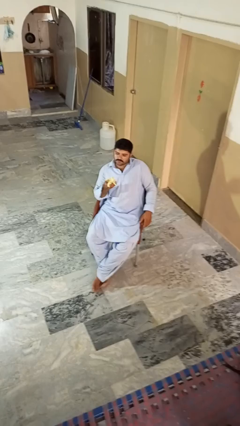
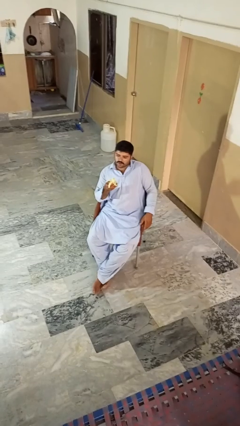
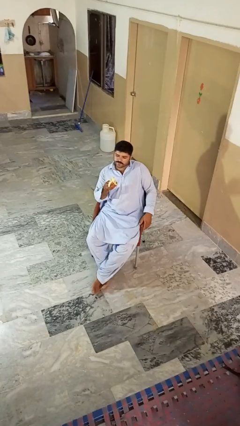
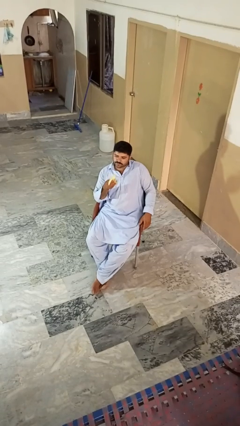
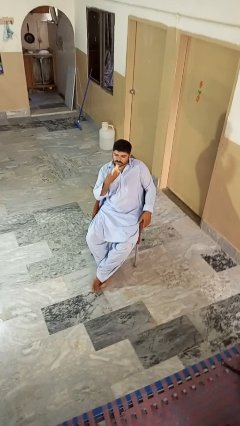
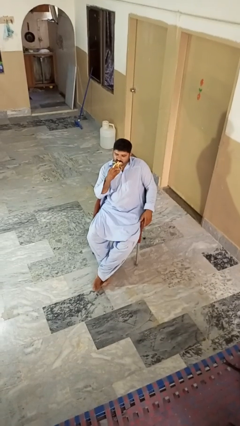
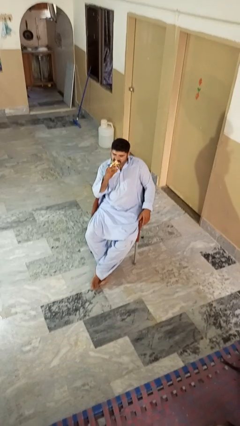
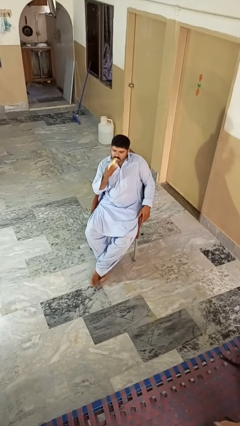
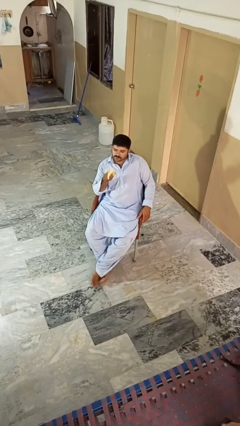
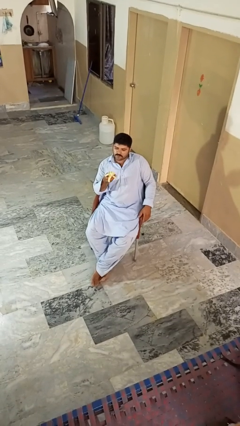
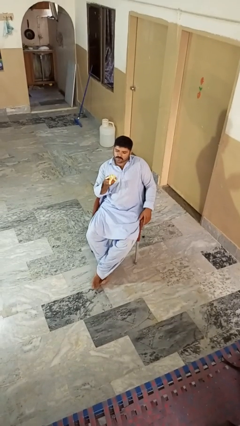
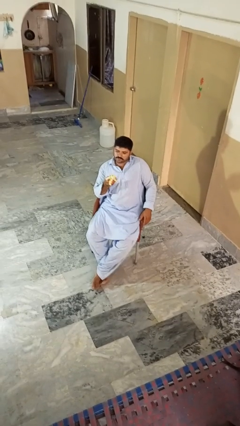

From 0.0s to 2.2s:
person eats banana

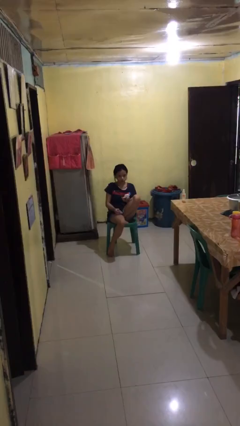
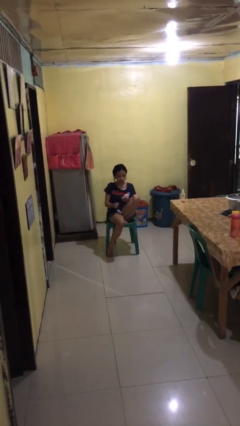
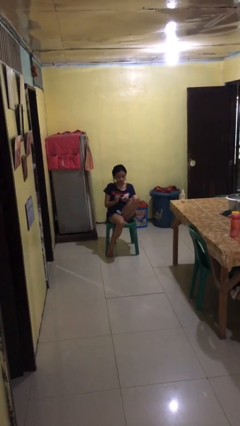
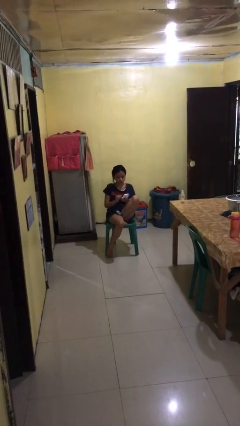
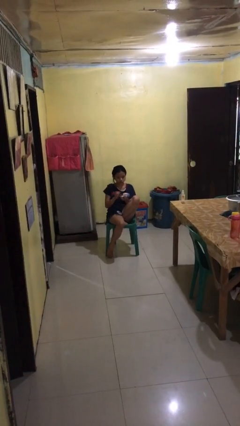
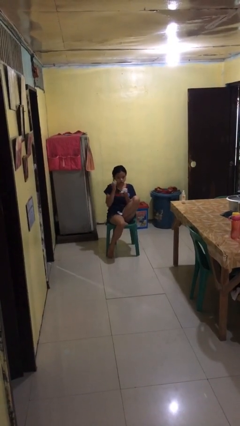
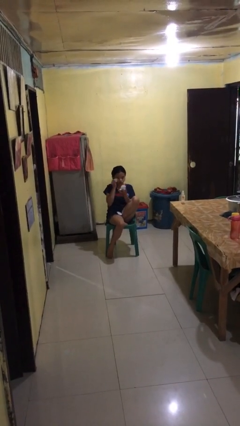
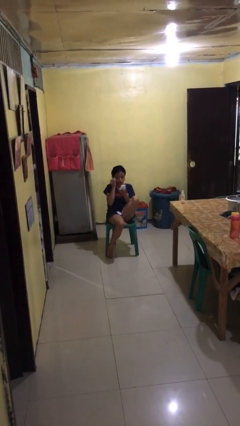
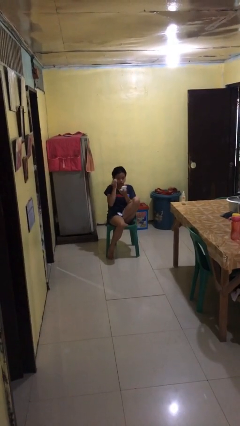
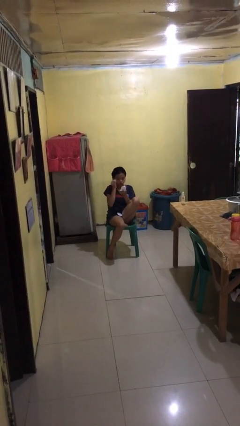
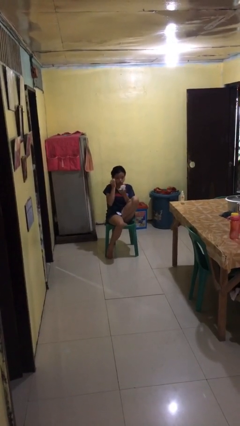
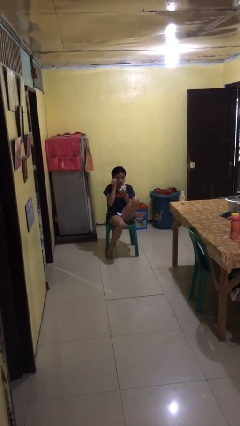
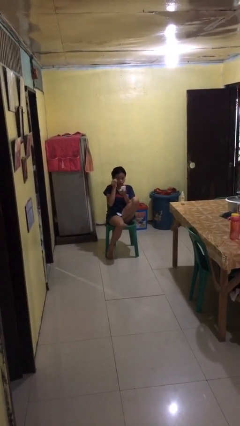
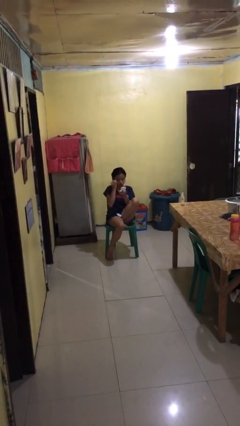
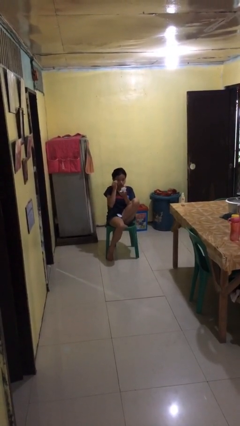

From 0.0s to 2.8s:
person applies eye makeup

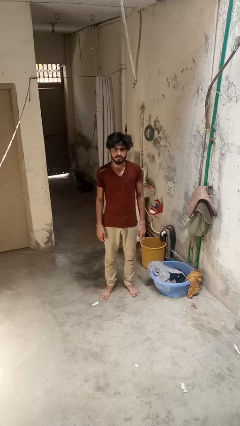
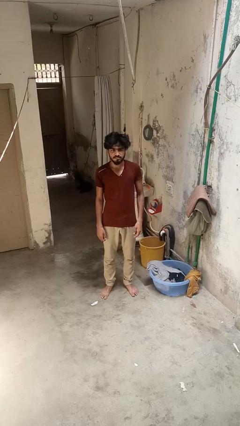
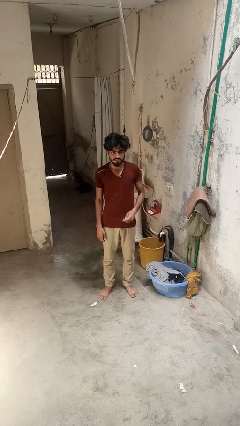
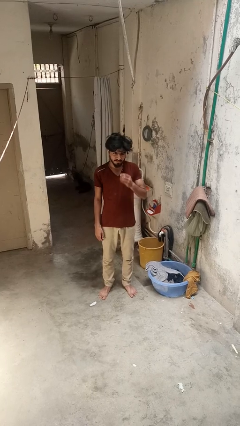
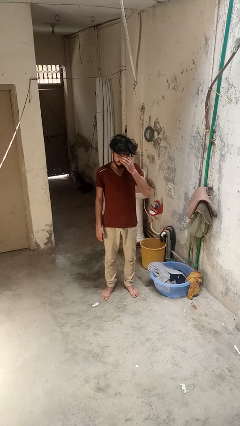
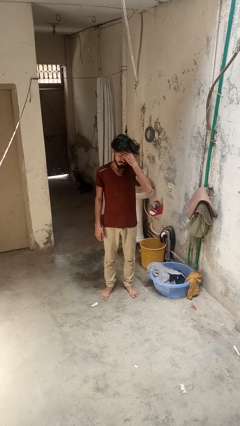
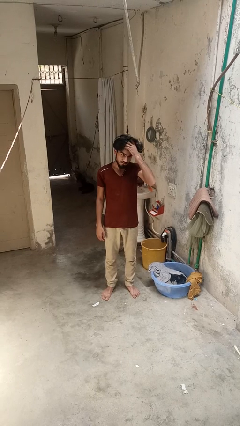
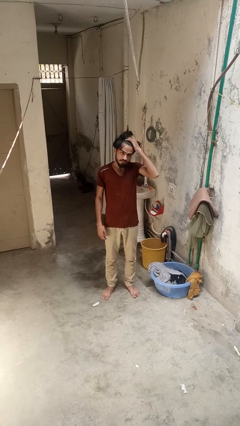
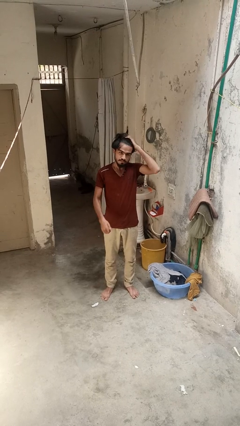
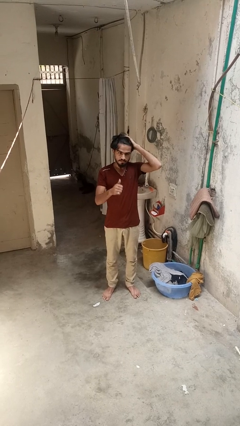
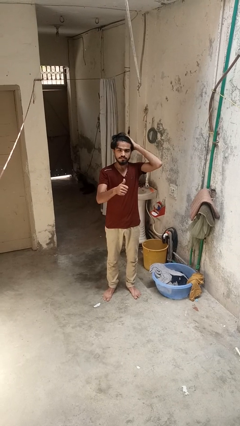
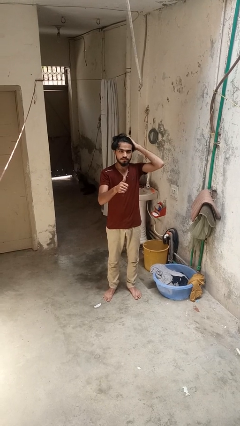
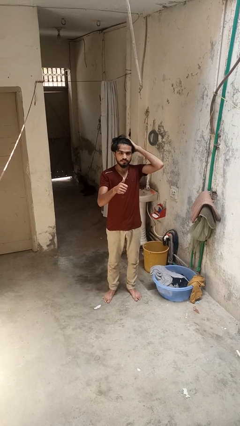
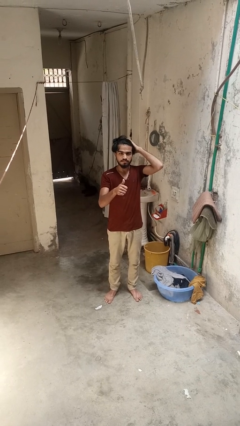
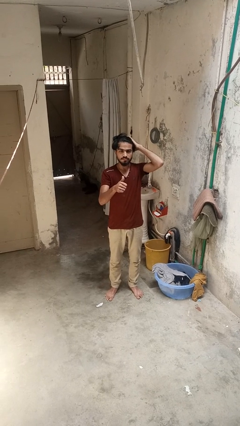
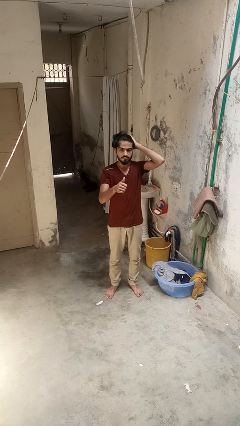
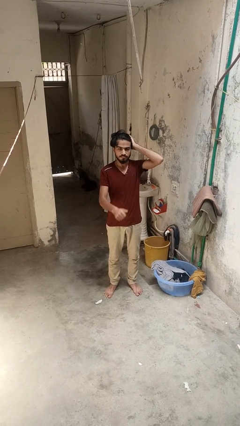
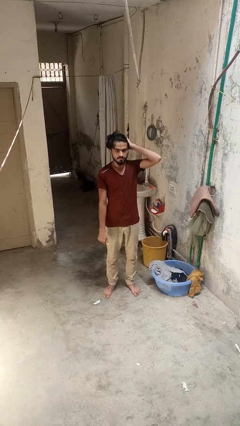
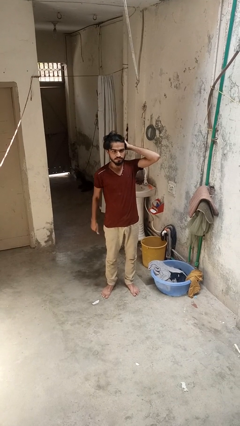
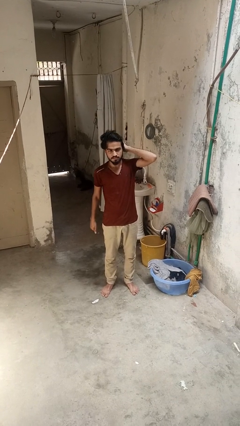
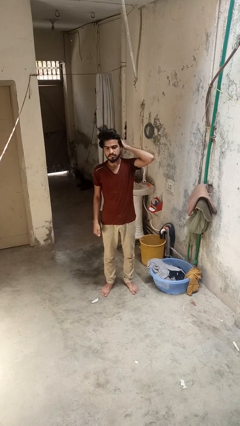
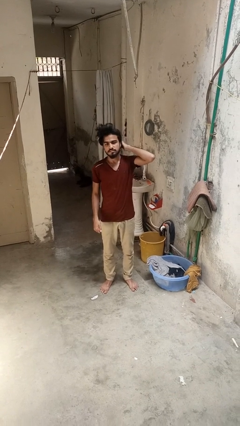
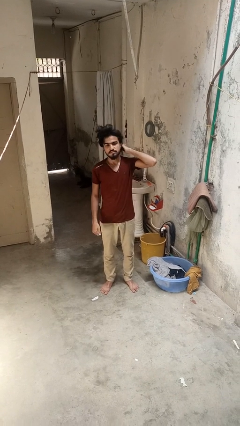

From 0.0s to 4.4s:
person gestures thumbs up

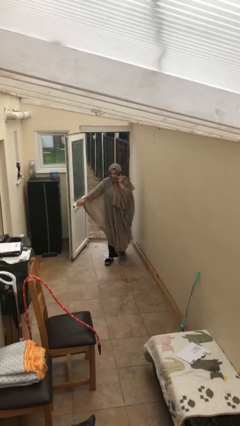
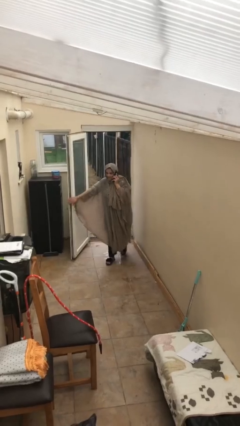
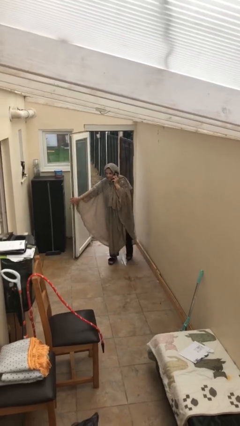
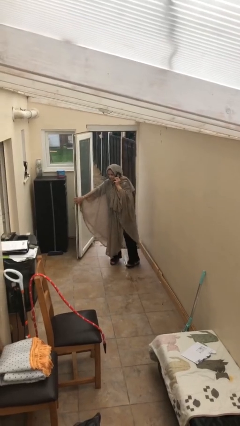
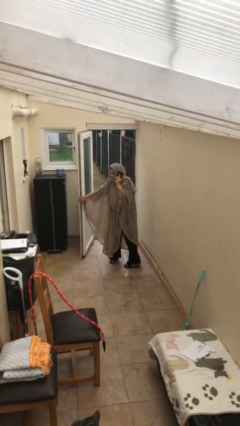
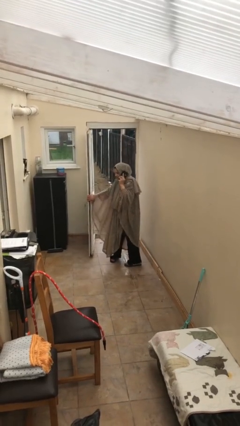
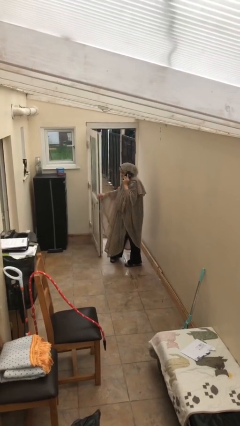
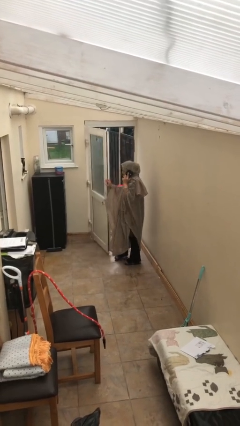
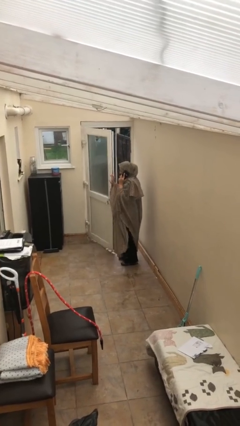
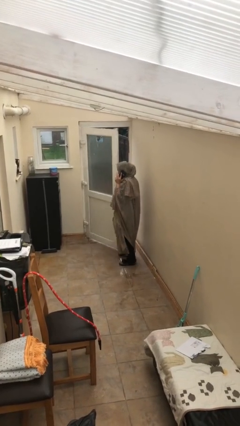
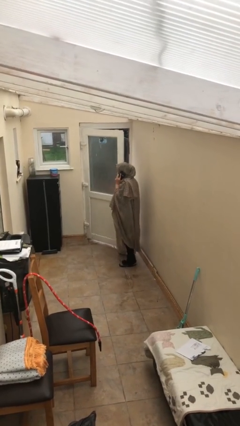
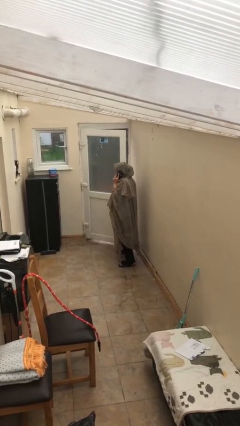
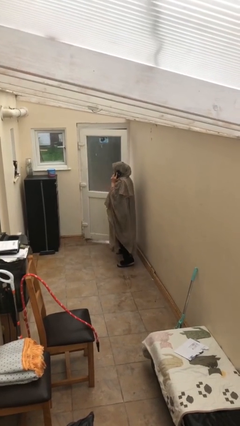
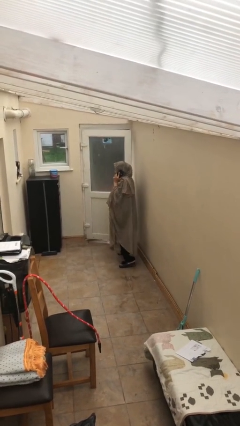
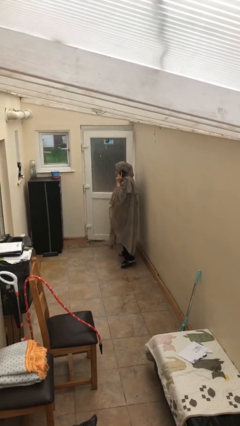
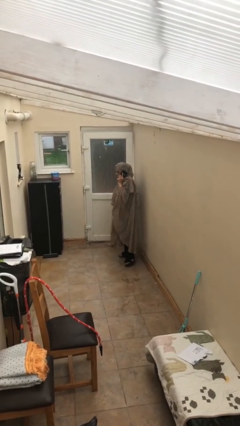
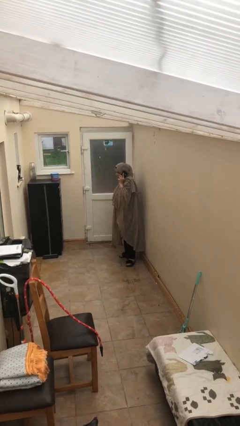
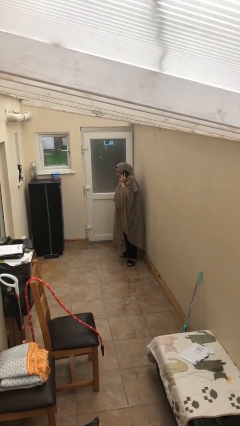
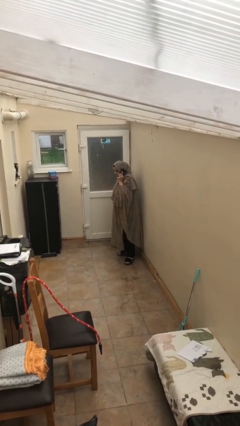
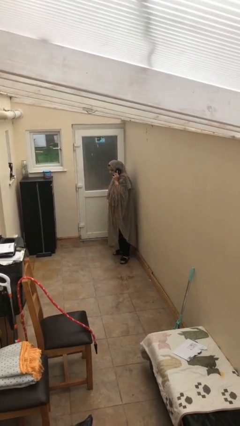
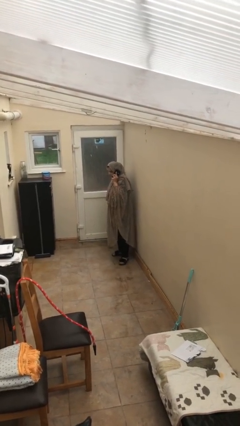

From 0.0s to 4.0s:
person closes facility door

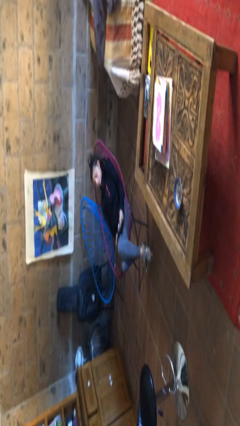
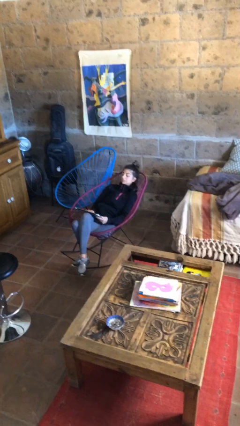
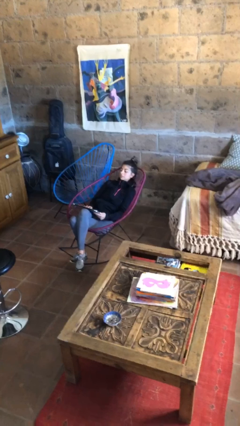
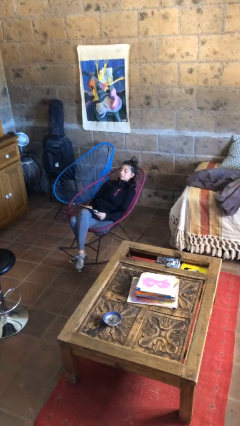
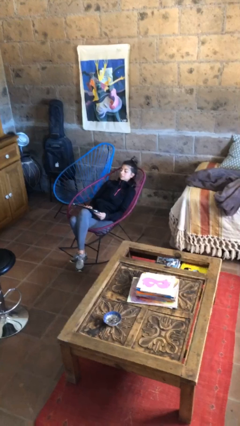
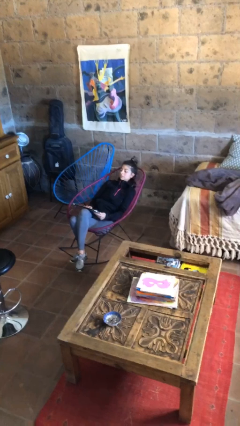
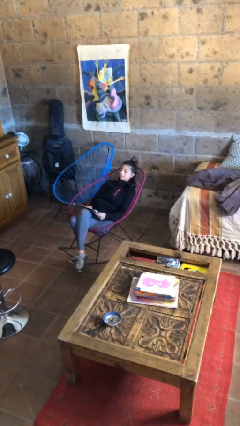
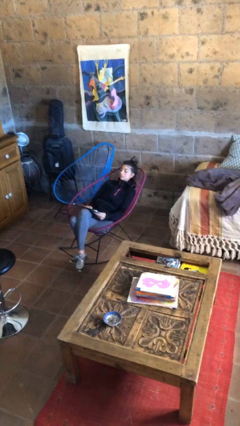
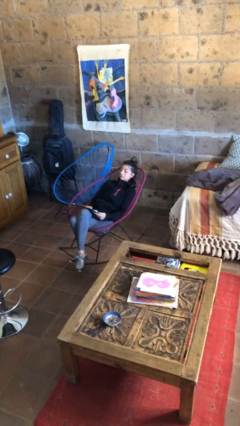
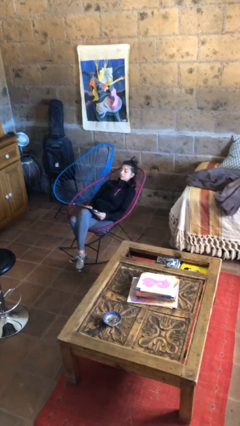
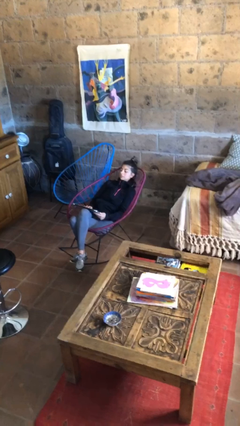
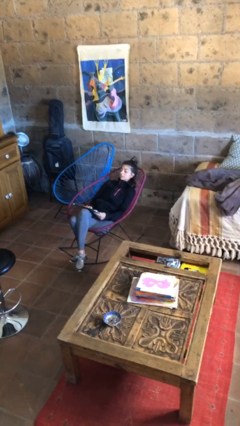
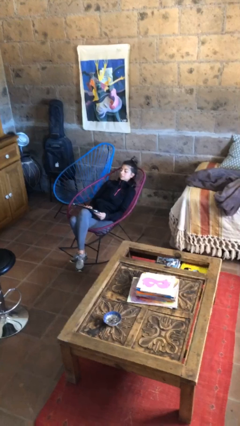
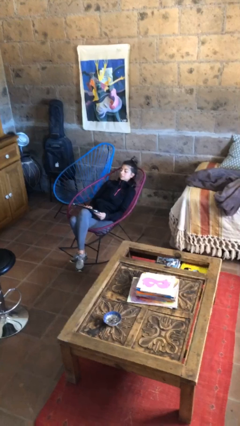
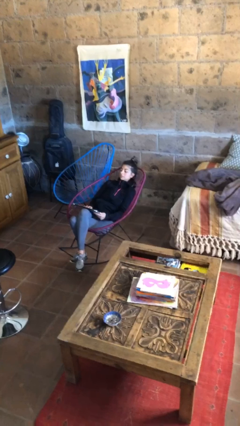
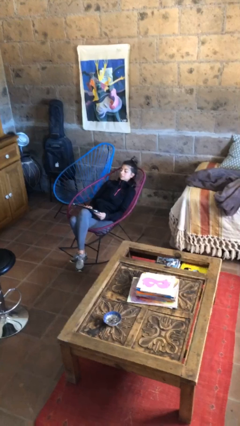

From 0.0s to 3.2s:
person interacts with laptop

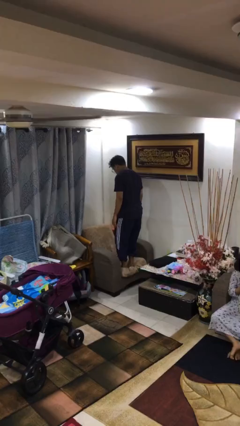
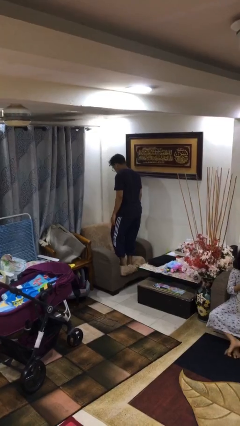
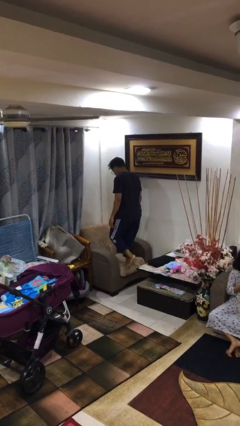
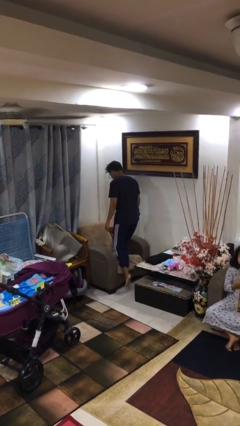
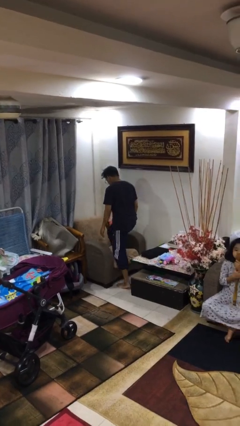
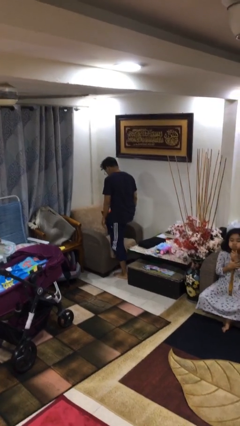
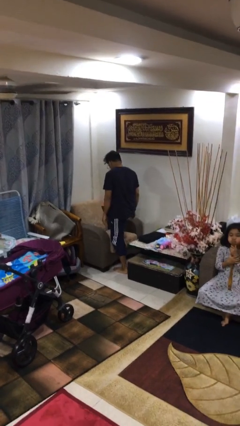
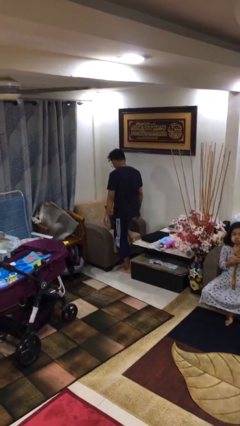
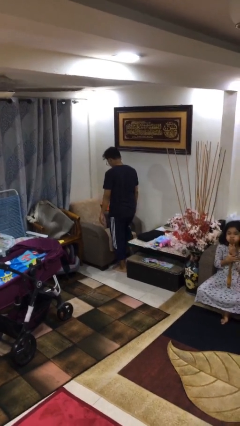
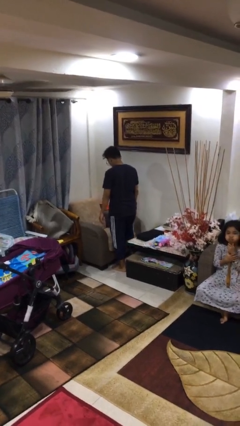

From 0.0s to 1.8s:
person climbs off couch
